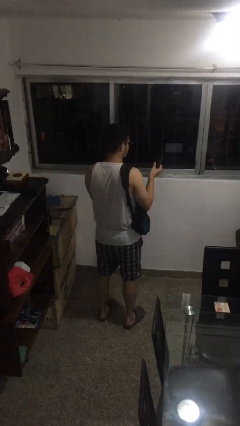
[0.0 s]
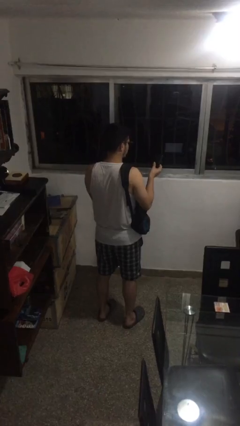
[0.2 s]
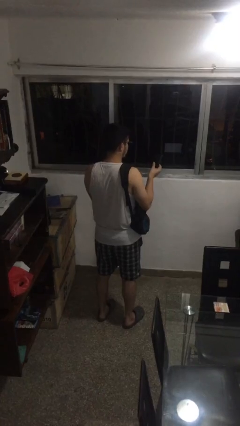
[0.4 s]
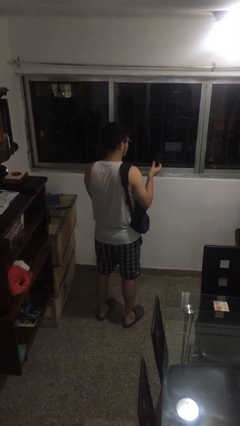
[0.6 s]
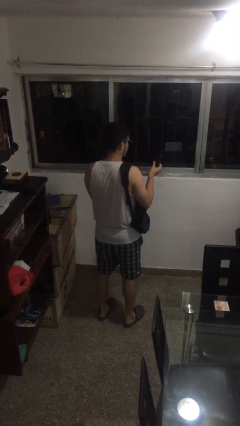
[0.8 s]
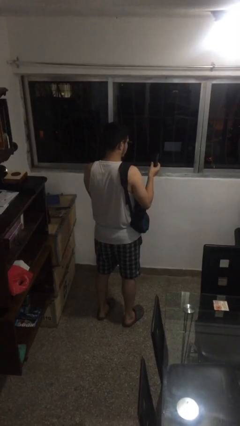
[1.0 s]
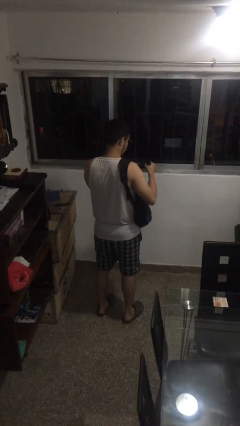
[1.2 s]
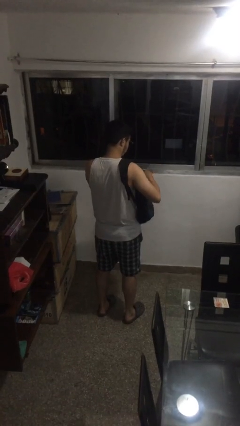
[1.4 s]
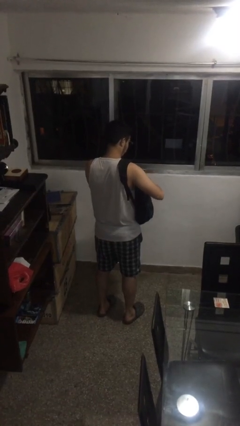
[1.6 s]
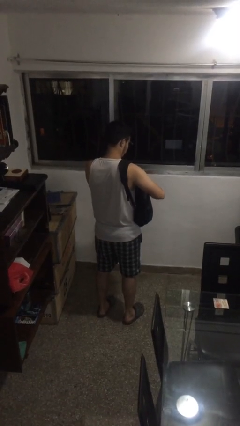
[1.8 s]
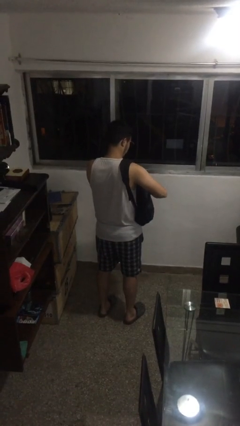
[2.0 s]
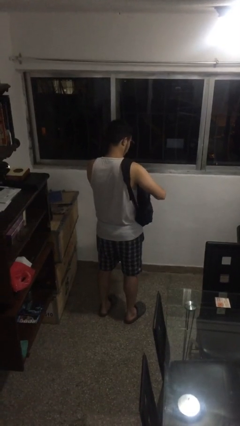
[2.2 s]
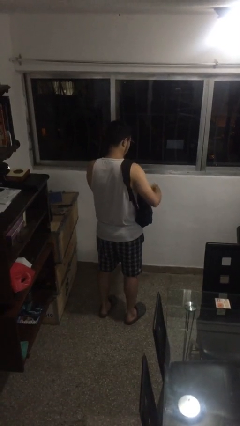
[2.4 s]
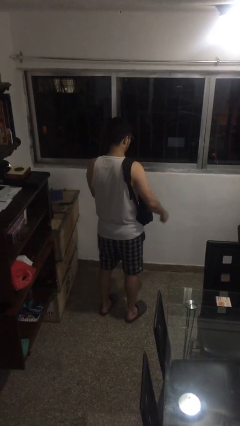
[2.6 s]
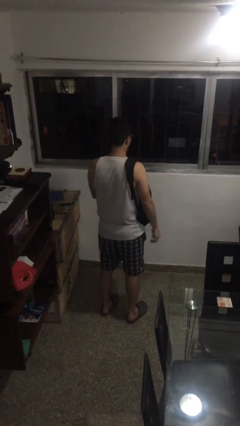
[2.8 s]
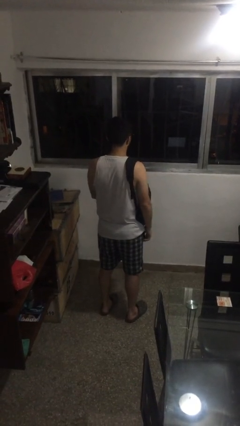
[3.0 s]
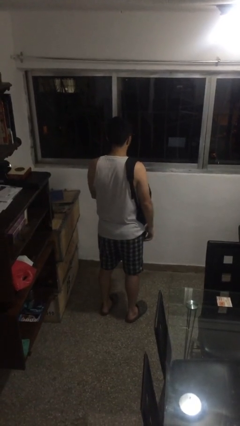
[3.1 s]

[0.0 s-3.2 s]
person puts object into backpack

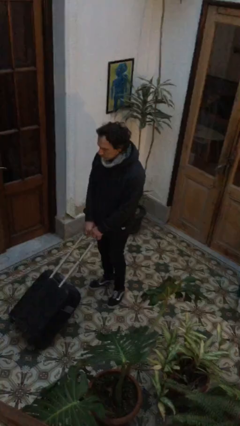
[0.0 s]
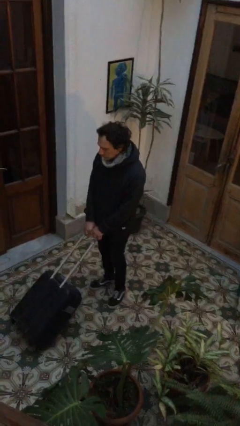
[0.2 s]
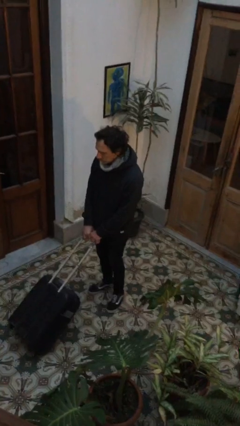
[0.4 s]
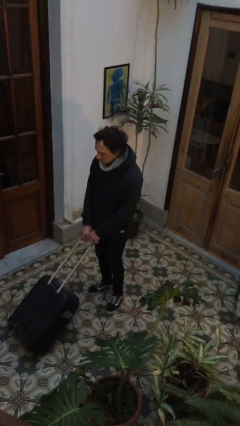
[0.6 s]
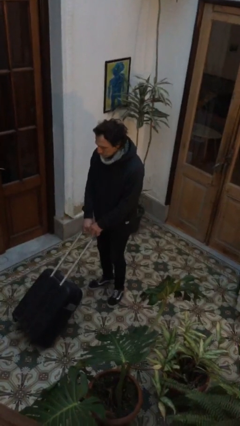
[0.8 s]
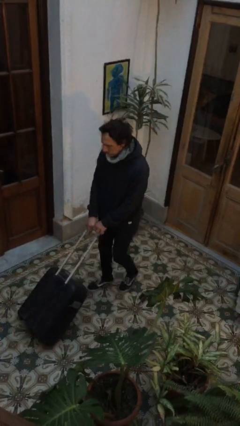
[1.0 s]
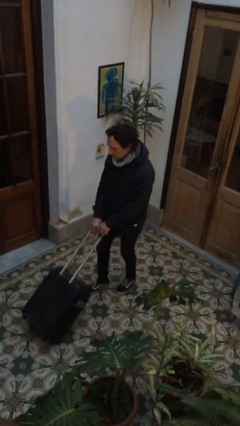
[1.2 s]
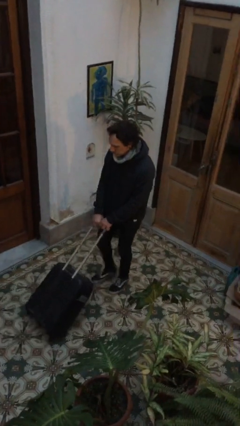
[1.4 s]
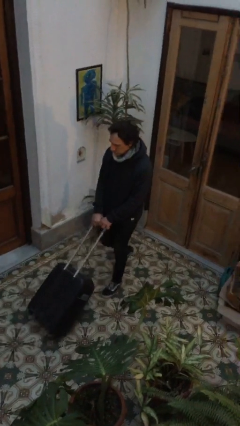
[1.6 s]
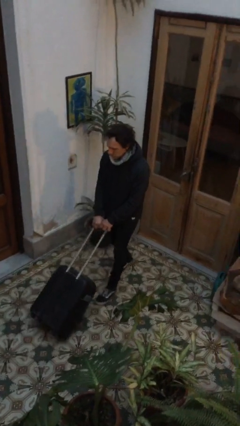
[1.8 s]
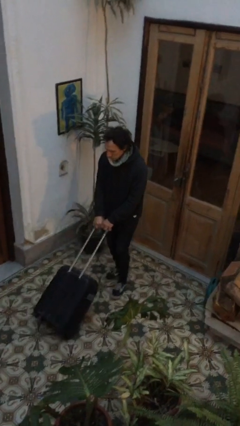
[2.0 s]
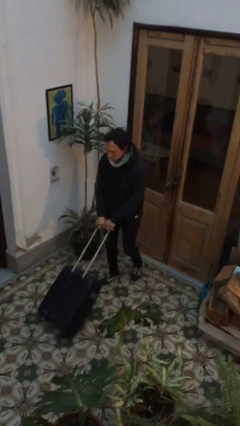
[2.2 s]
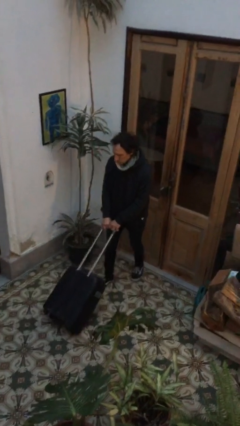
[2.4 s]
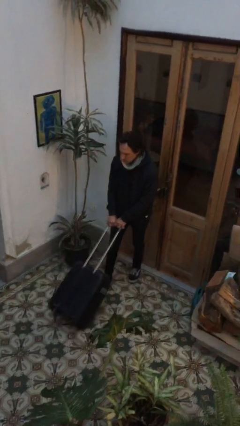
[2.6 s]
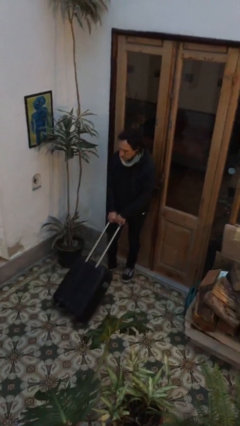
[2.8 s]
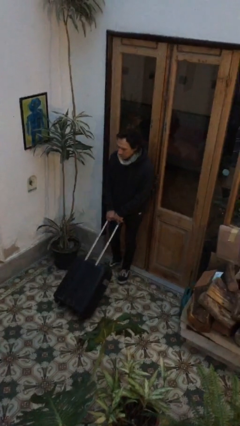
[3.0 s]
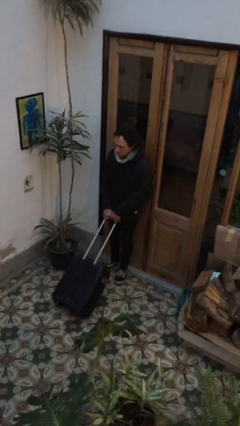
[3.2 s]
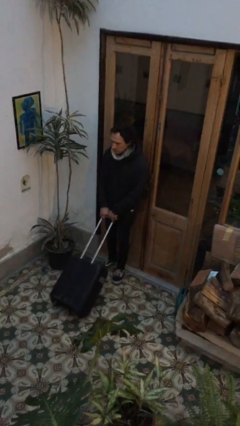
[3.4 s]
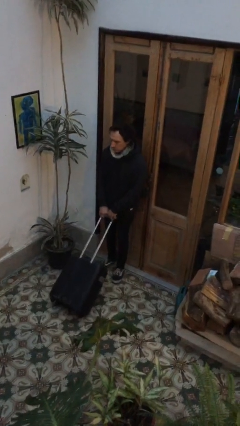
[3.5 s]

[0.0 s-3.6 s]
person pulls wheeled cart

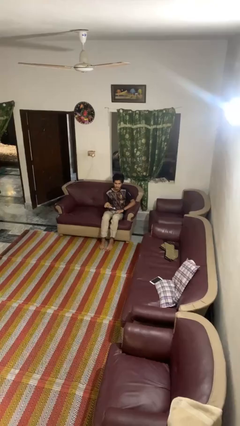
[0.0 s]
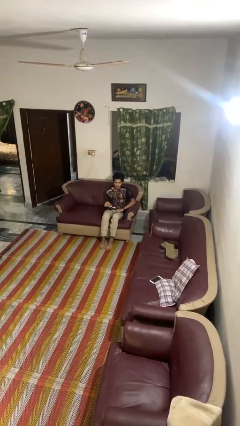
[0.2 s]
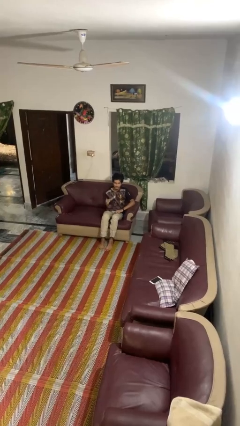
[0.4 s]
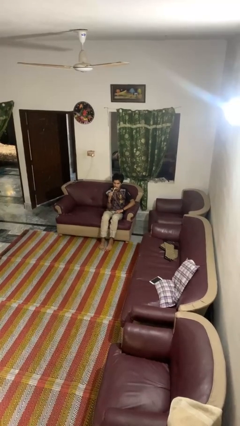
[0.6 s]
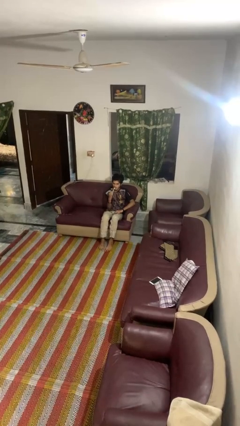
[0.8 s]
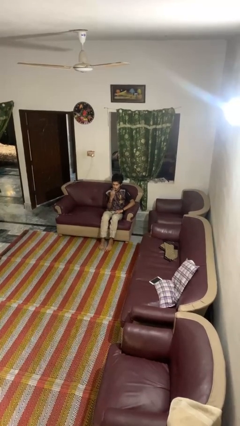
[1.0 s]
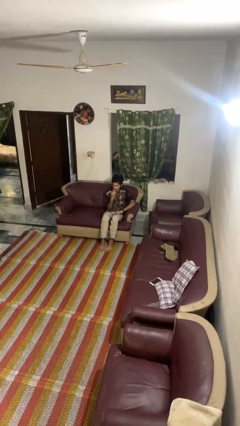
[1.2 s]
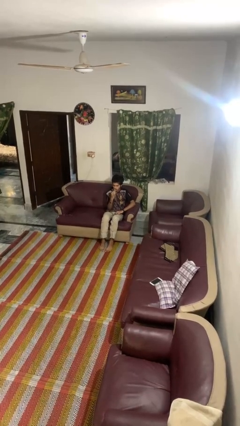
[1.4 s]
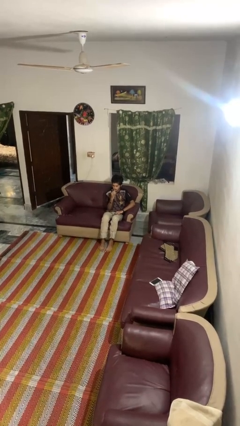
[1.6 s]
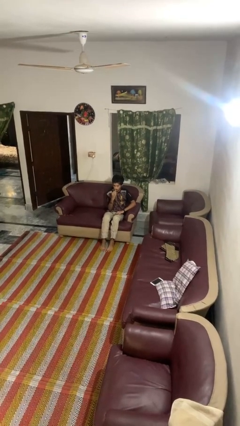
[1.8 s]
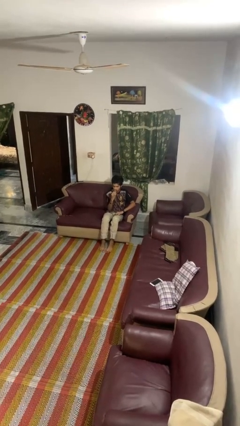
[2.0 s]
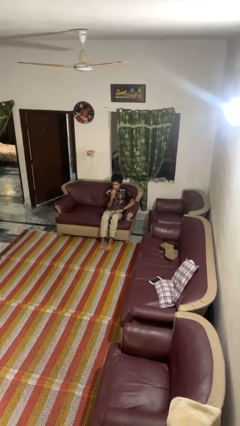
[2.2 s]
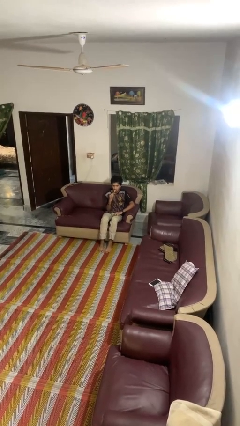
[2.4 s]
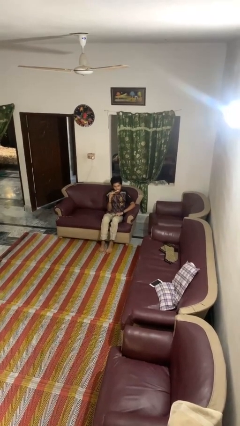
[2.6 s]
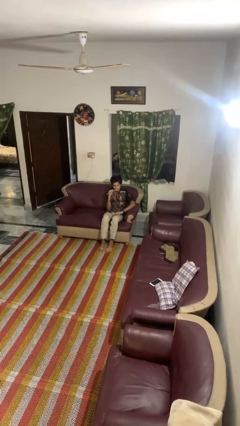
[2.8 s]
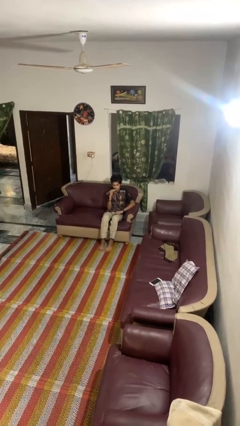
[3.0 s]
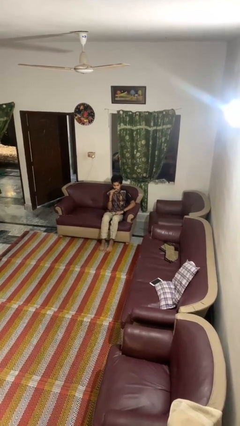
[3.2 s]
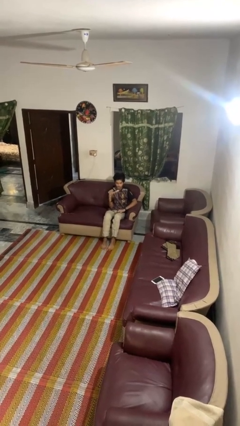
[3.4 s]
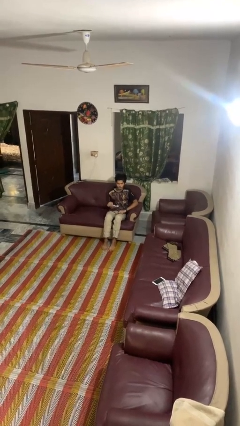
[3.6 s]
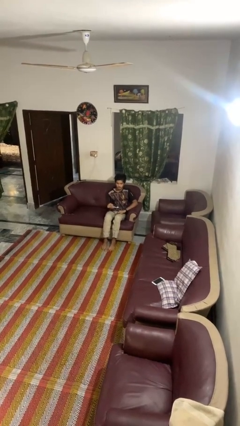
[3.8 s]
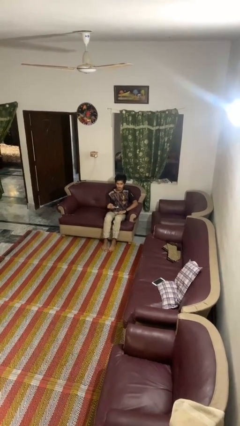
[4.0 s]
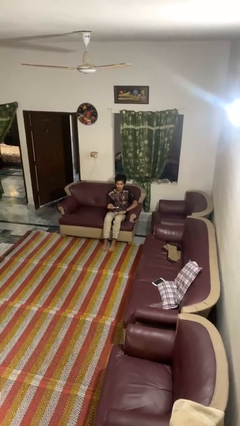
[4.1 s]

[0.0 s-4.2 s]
person brushes teeth

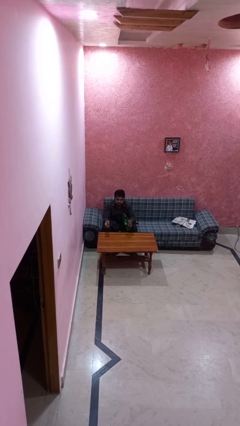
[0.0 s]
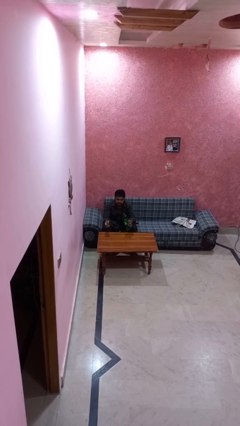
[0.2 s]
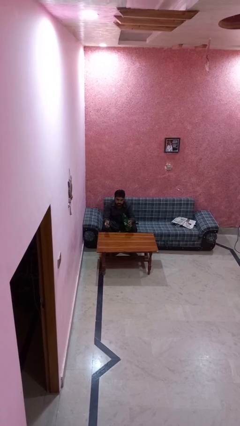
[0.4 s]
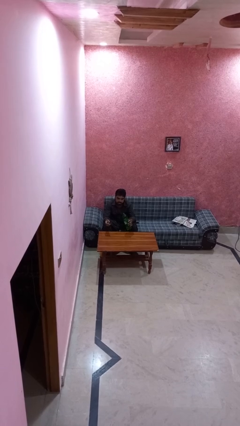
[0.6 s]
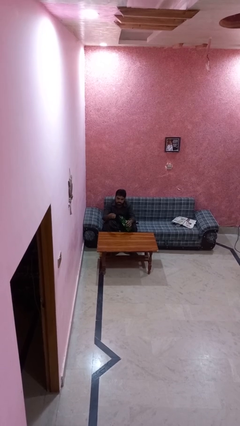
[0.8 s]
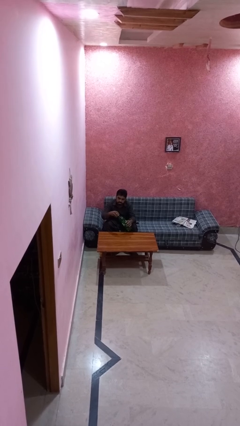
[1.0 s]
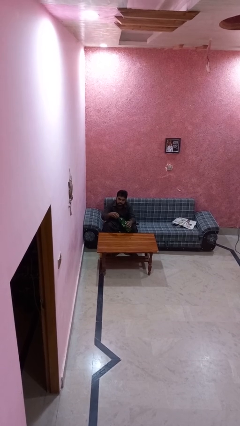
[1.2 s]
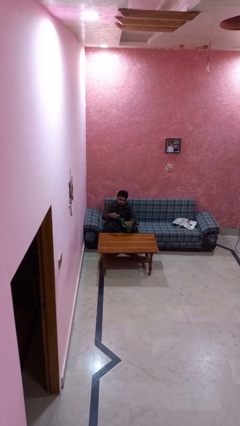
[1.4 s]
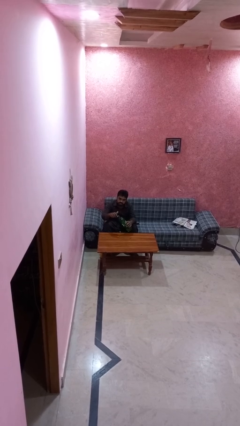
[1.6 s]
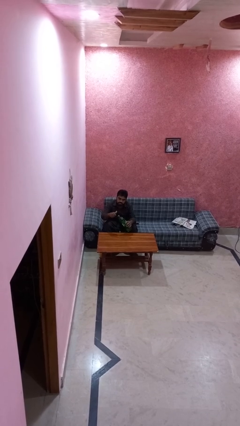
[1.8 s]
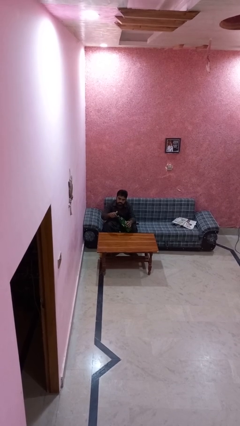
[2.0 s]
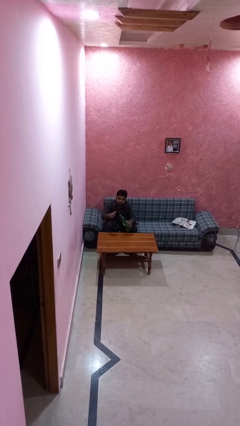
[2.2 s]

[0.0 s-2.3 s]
person screws lid to bottle

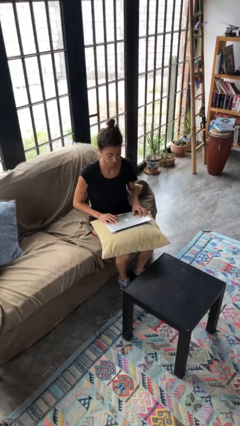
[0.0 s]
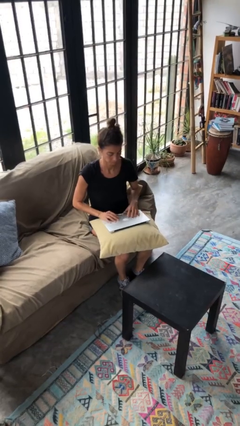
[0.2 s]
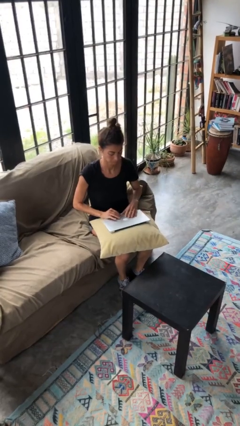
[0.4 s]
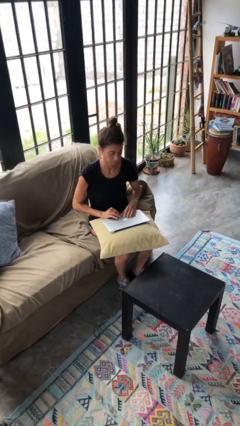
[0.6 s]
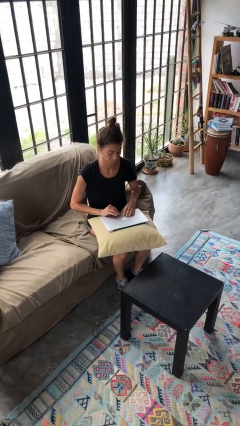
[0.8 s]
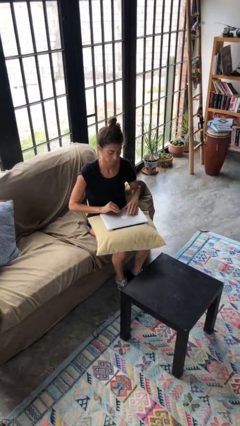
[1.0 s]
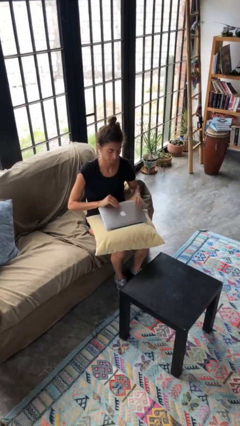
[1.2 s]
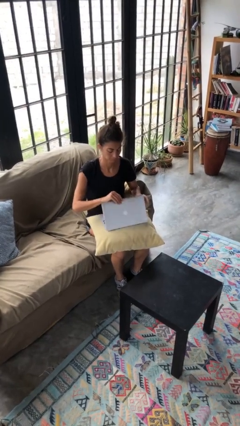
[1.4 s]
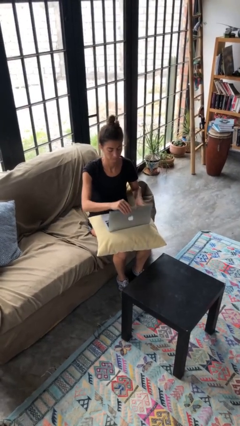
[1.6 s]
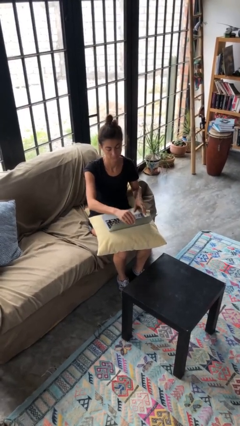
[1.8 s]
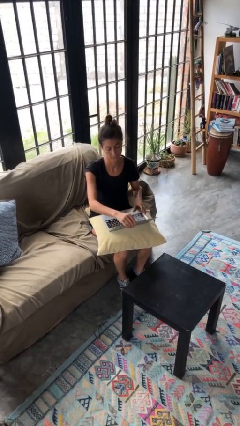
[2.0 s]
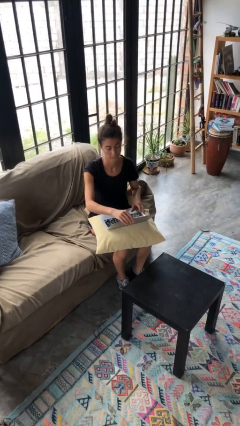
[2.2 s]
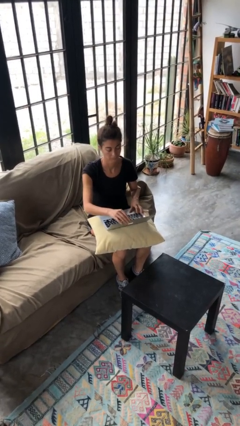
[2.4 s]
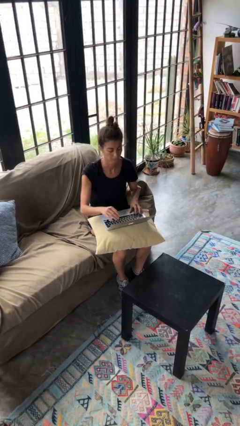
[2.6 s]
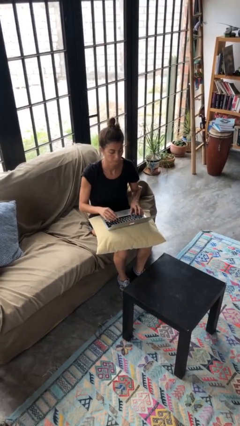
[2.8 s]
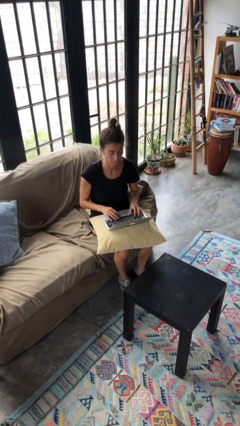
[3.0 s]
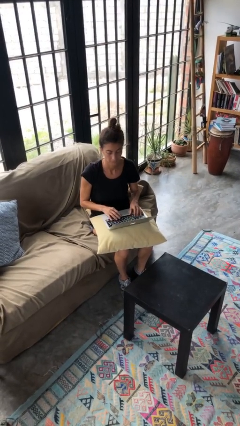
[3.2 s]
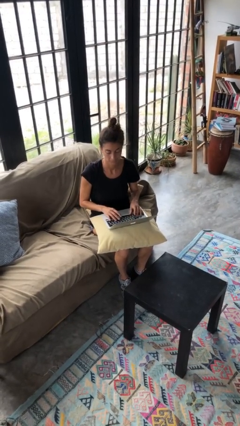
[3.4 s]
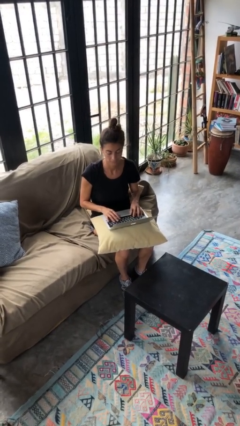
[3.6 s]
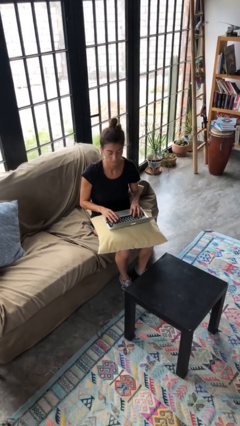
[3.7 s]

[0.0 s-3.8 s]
person opens laptop

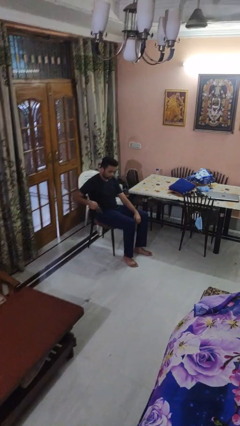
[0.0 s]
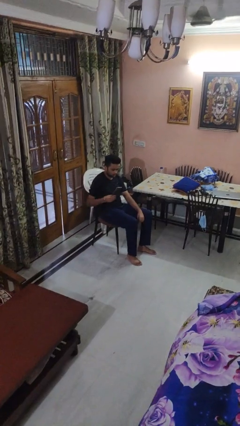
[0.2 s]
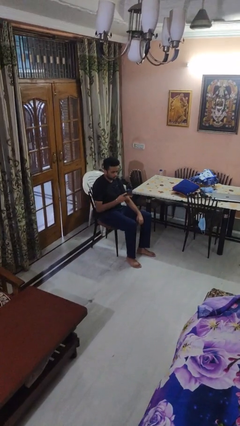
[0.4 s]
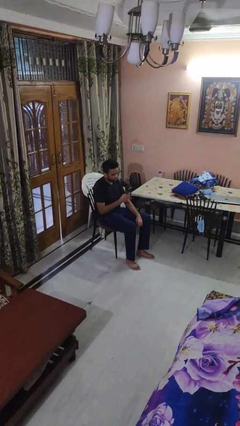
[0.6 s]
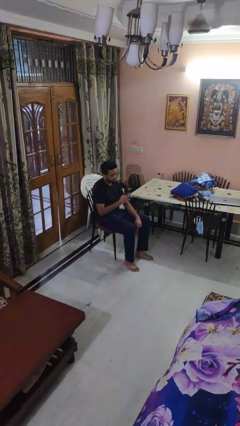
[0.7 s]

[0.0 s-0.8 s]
person takes phone from pocket
